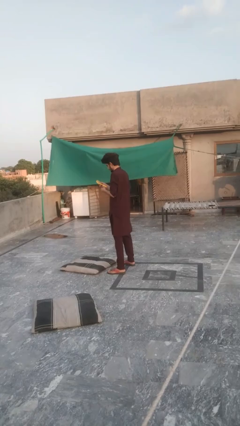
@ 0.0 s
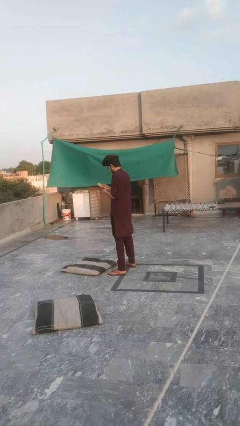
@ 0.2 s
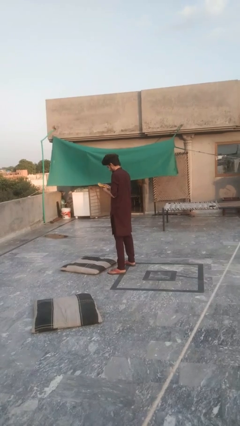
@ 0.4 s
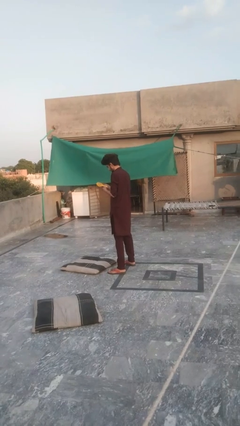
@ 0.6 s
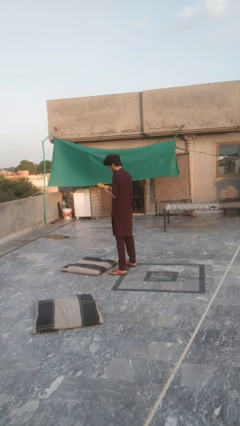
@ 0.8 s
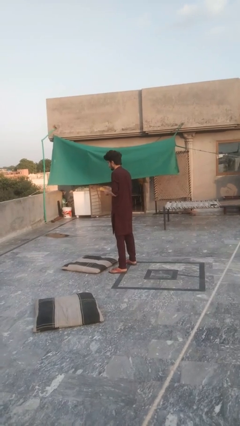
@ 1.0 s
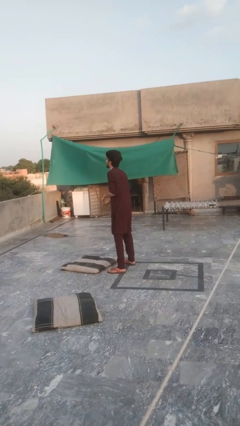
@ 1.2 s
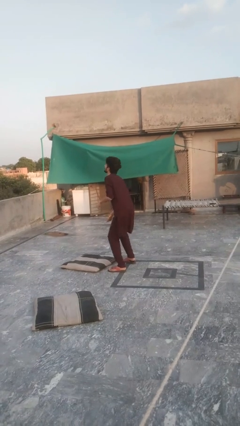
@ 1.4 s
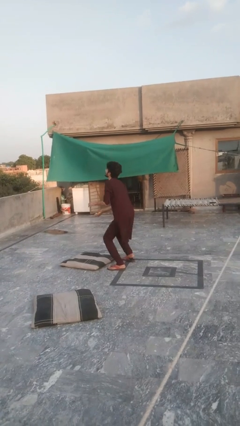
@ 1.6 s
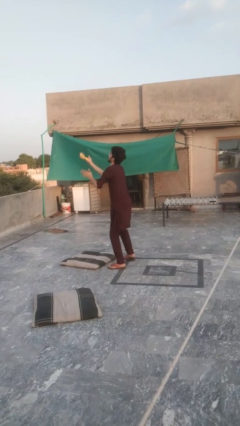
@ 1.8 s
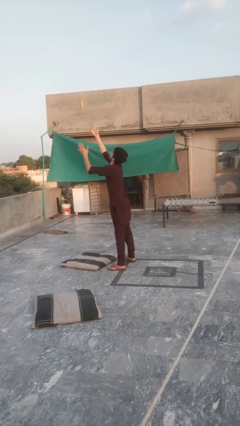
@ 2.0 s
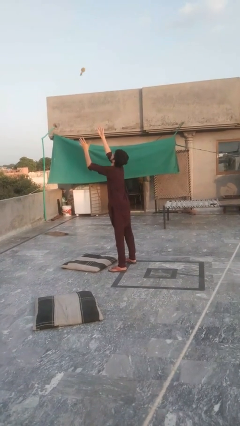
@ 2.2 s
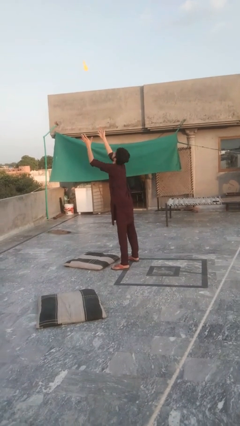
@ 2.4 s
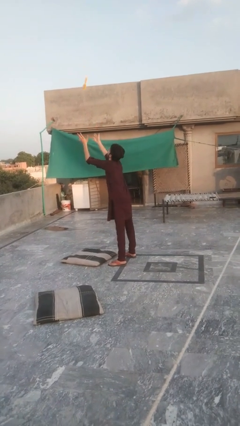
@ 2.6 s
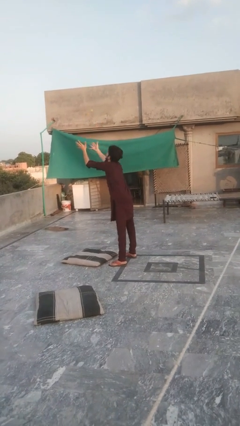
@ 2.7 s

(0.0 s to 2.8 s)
person drops object

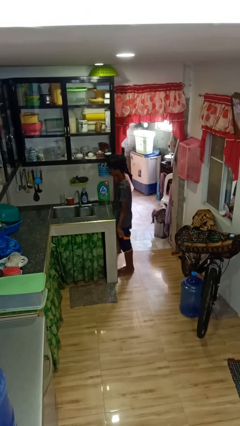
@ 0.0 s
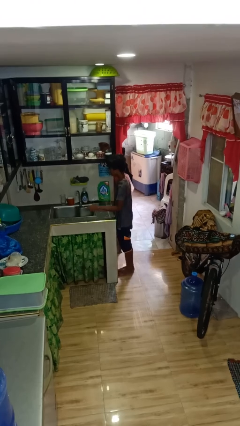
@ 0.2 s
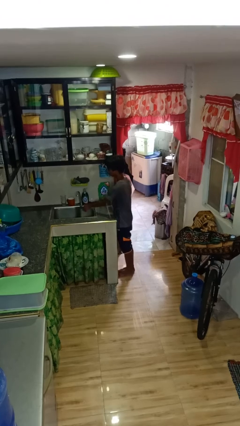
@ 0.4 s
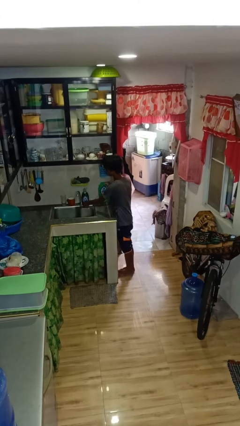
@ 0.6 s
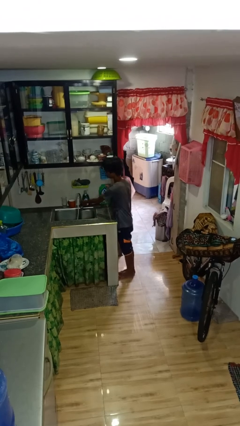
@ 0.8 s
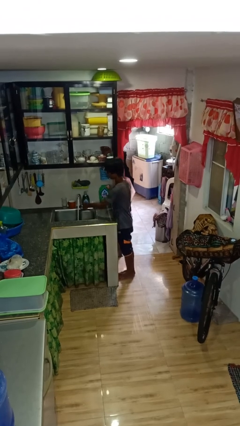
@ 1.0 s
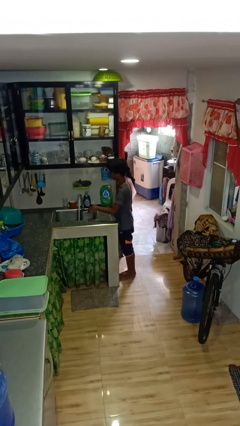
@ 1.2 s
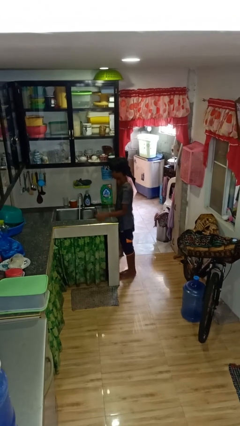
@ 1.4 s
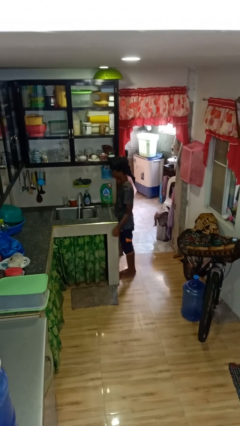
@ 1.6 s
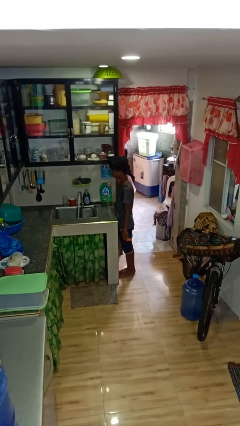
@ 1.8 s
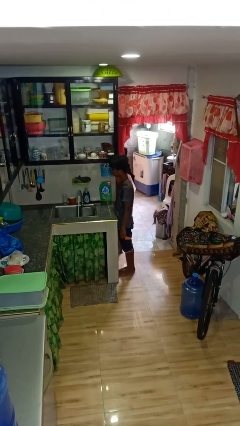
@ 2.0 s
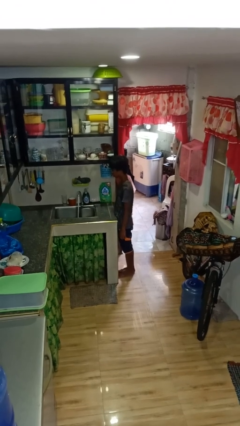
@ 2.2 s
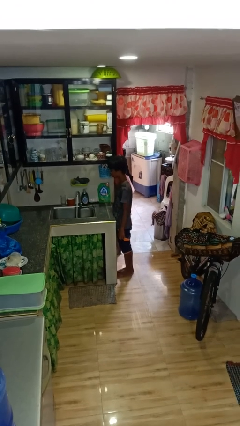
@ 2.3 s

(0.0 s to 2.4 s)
person turns on faucet

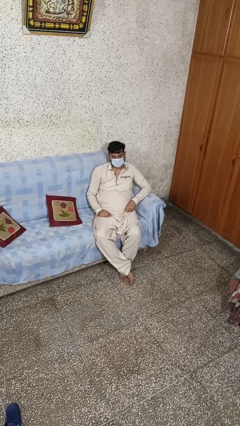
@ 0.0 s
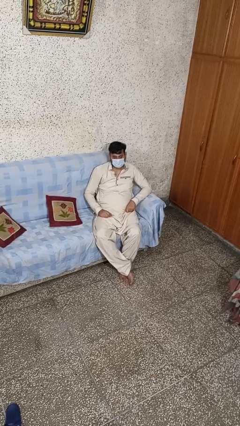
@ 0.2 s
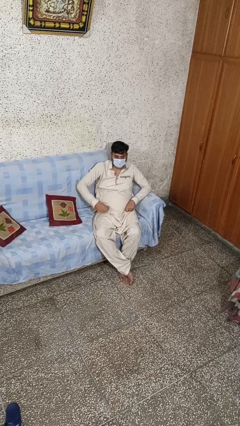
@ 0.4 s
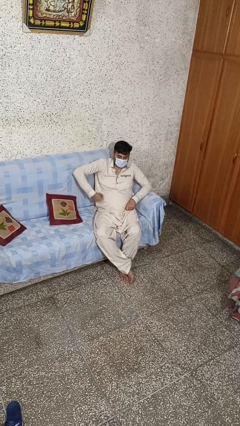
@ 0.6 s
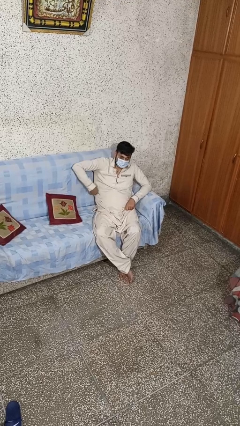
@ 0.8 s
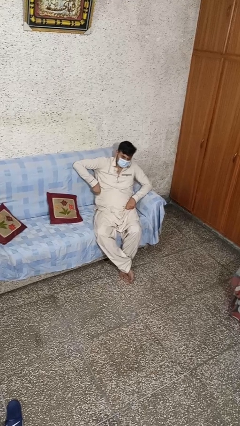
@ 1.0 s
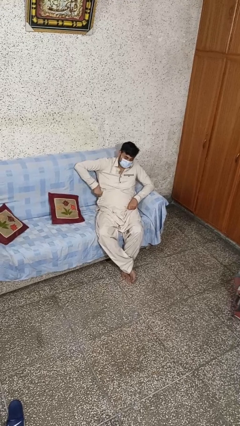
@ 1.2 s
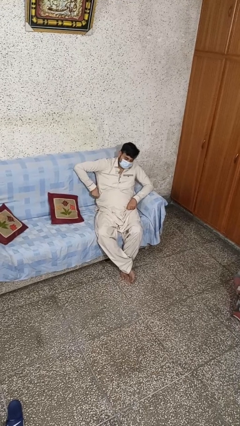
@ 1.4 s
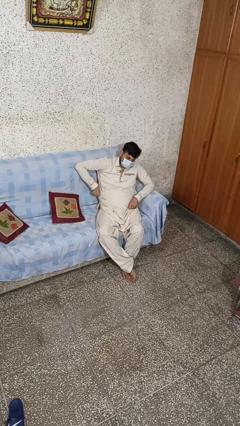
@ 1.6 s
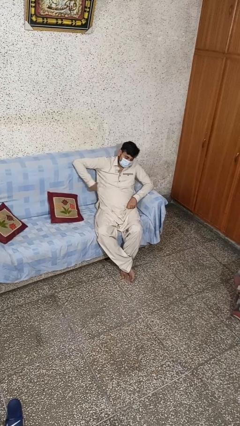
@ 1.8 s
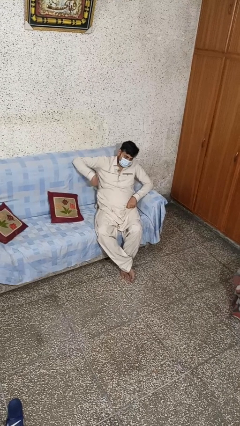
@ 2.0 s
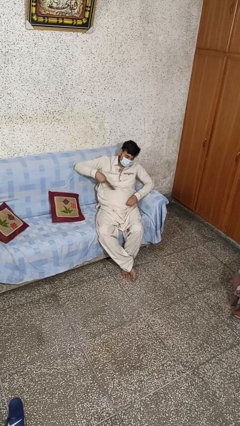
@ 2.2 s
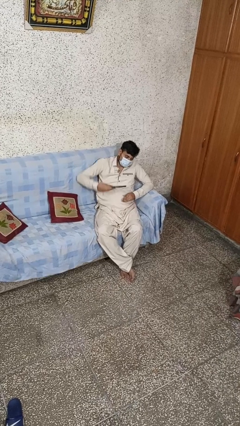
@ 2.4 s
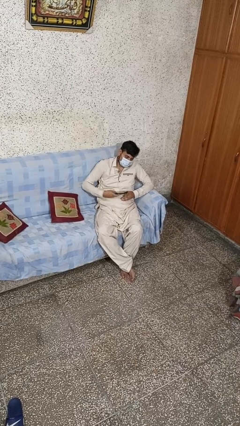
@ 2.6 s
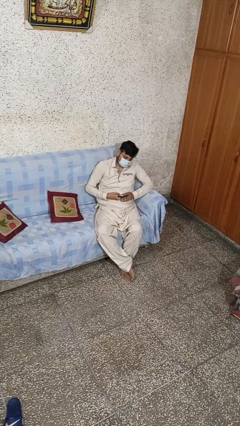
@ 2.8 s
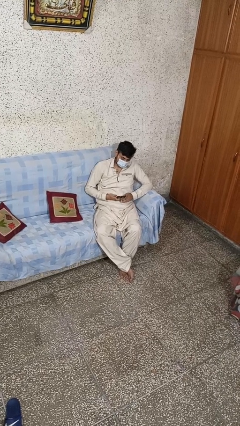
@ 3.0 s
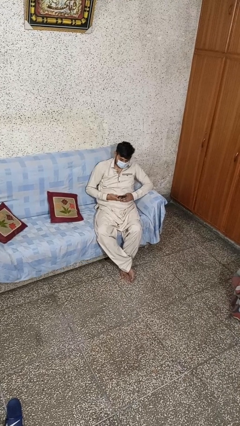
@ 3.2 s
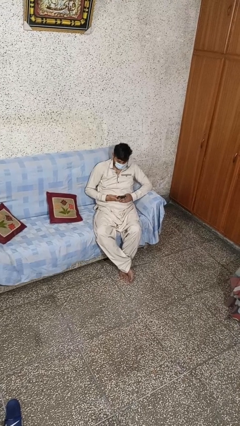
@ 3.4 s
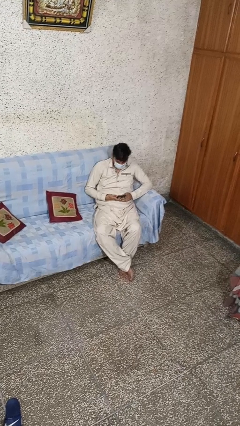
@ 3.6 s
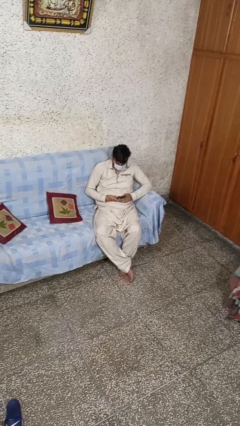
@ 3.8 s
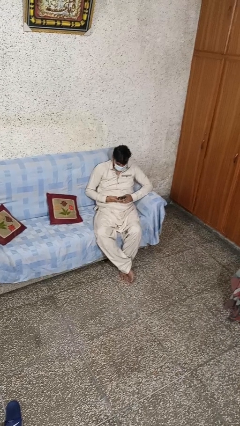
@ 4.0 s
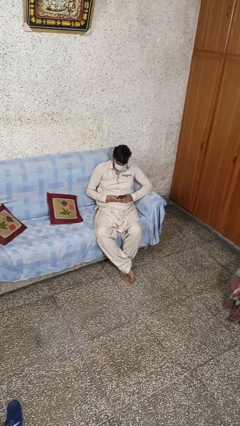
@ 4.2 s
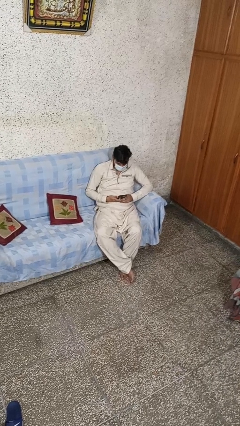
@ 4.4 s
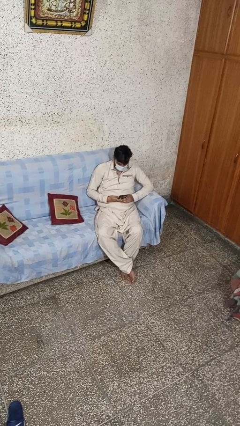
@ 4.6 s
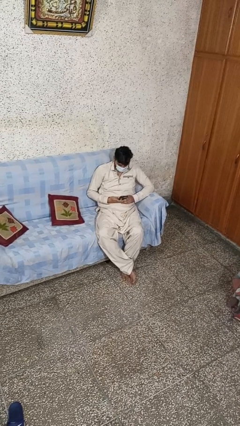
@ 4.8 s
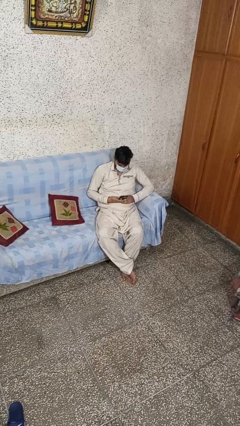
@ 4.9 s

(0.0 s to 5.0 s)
person takes phone from pocket

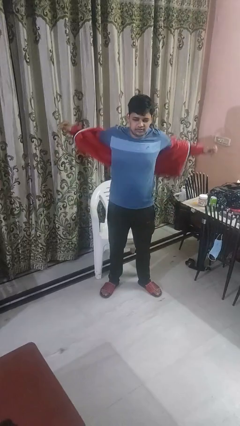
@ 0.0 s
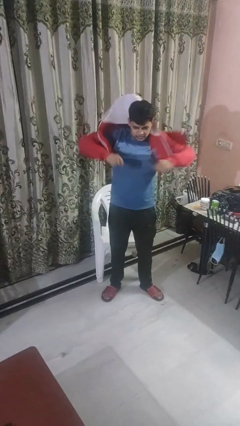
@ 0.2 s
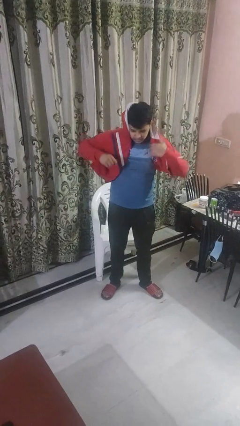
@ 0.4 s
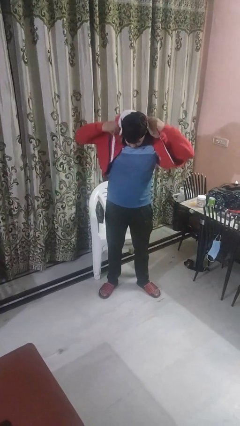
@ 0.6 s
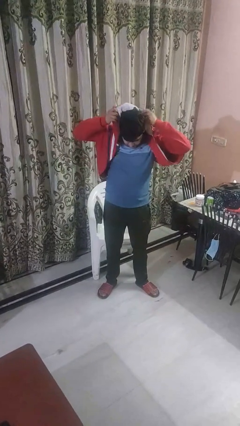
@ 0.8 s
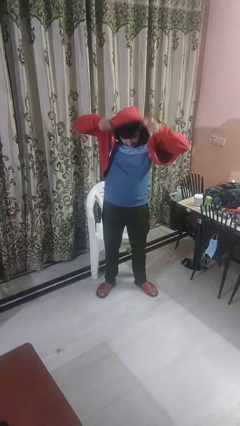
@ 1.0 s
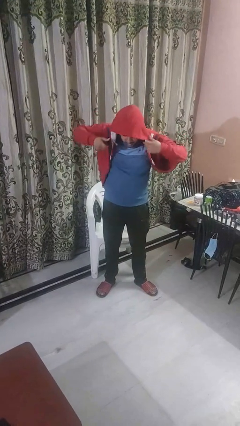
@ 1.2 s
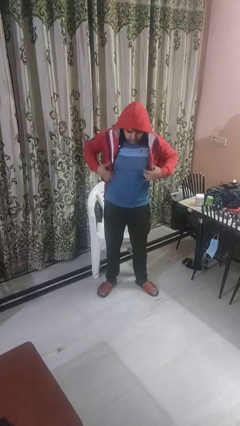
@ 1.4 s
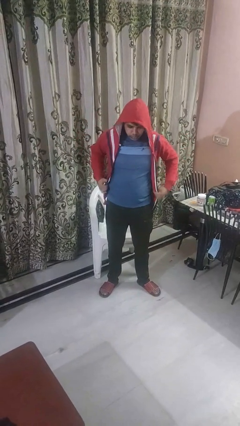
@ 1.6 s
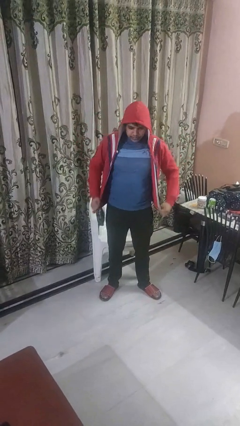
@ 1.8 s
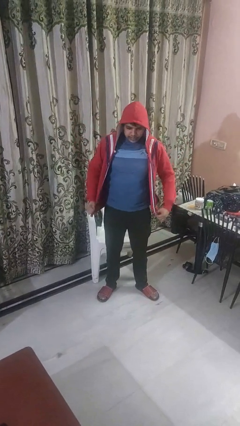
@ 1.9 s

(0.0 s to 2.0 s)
person puts on hoodie

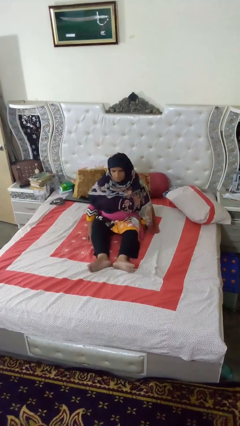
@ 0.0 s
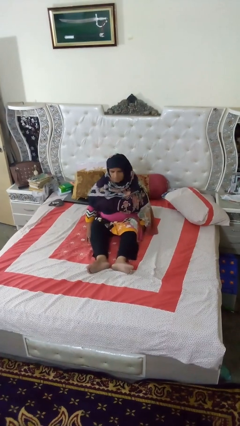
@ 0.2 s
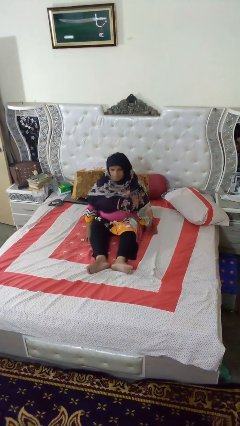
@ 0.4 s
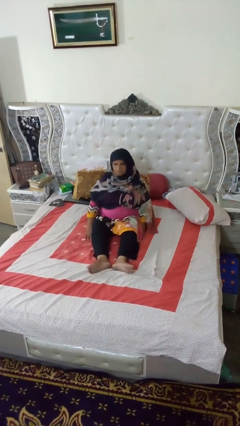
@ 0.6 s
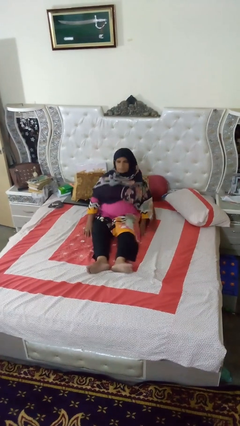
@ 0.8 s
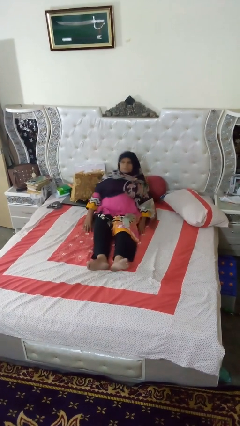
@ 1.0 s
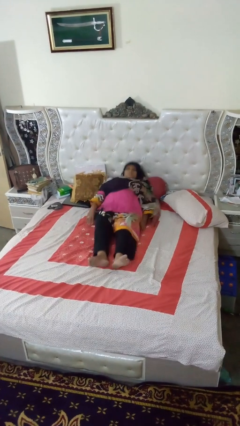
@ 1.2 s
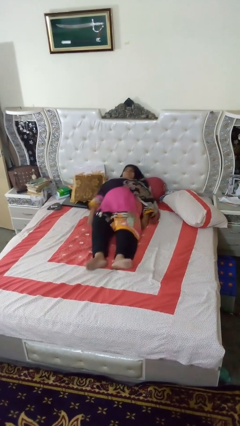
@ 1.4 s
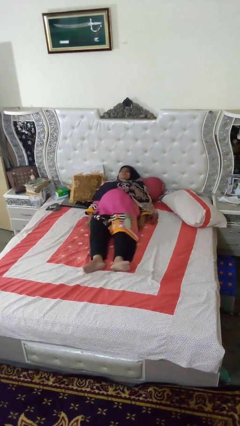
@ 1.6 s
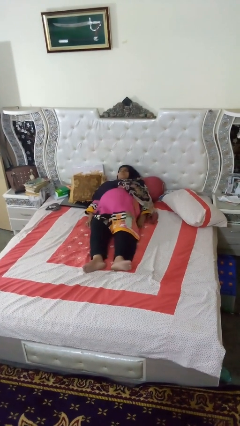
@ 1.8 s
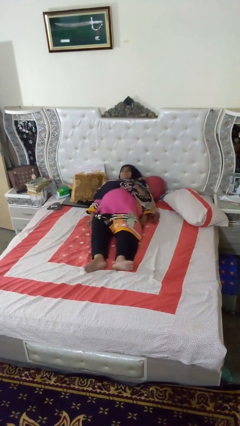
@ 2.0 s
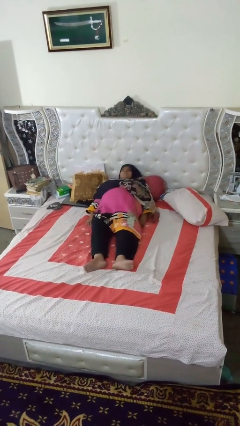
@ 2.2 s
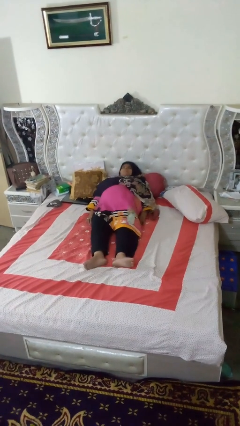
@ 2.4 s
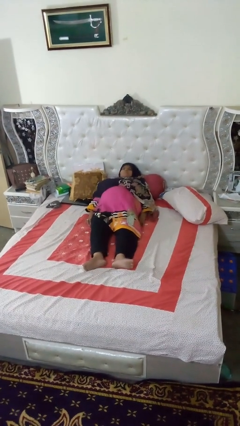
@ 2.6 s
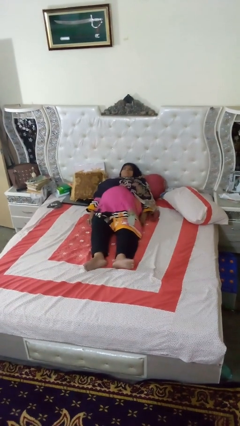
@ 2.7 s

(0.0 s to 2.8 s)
person lies down on bed

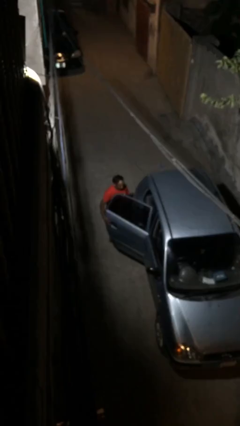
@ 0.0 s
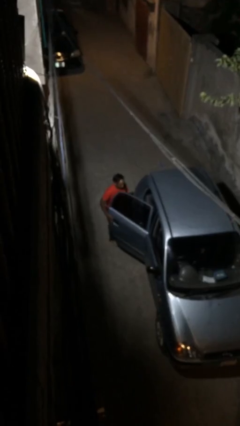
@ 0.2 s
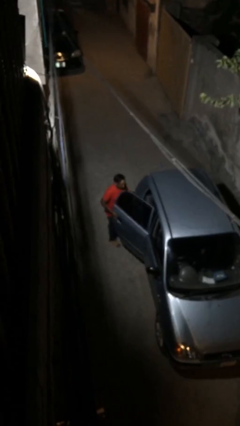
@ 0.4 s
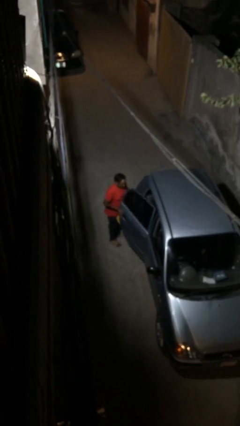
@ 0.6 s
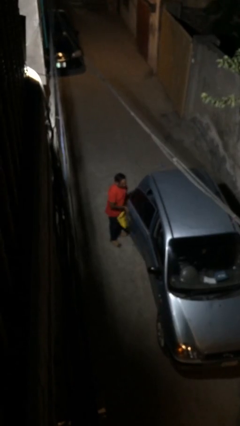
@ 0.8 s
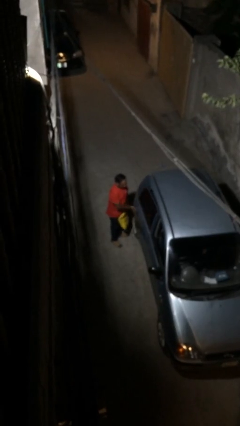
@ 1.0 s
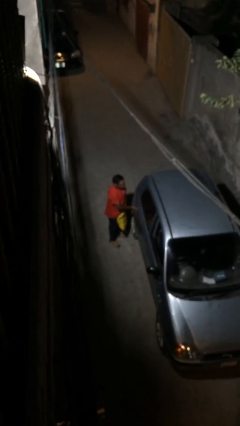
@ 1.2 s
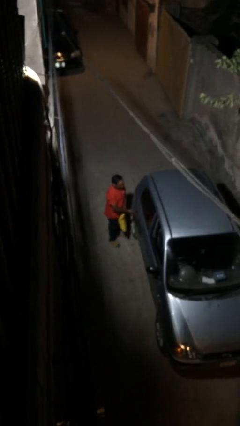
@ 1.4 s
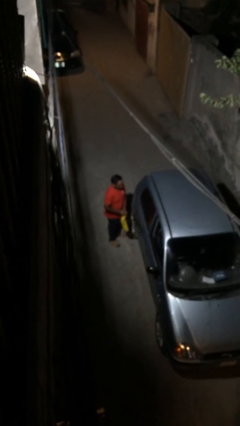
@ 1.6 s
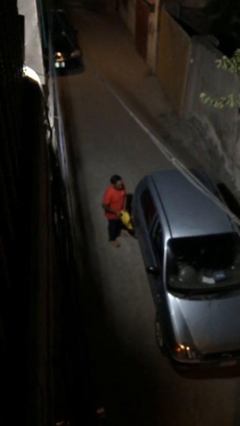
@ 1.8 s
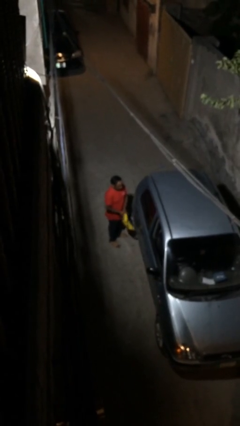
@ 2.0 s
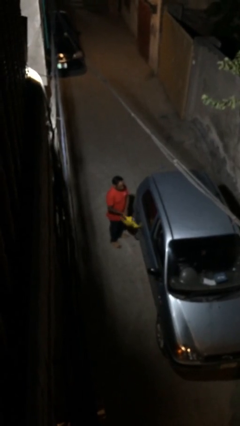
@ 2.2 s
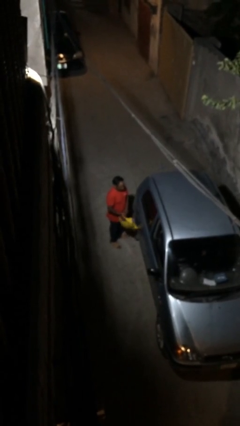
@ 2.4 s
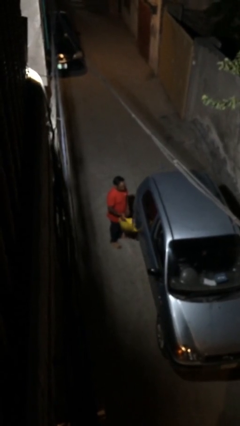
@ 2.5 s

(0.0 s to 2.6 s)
person closes car door
